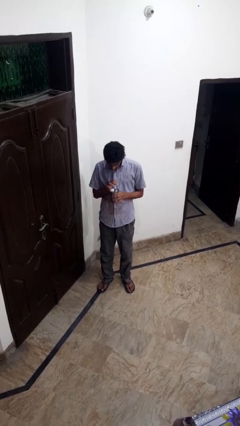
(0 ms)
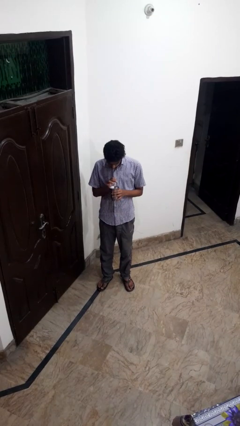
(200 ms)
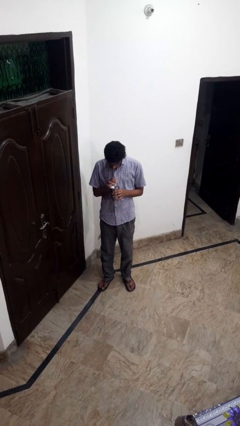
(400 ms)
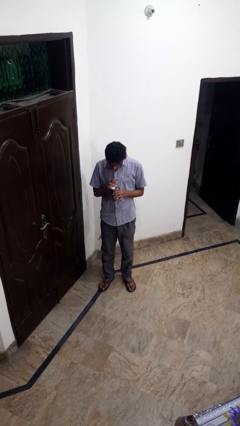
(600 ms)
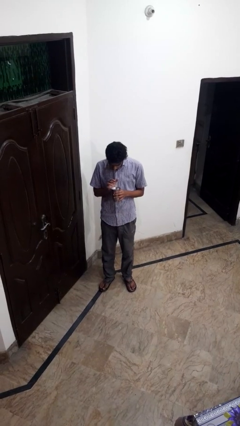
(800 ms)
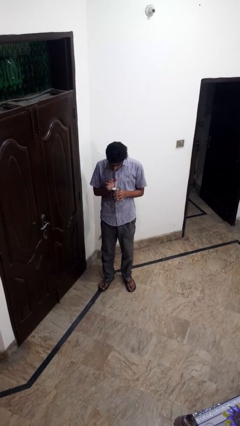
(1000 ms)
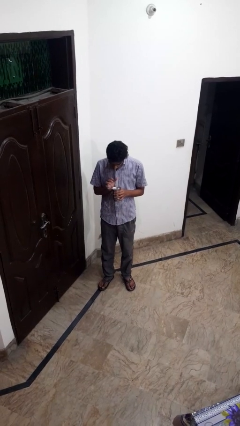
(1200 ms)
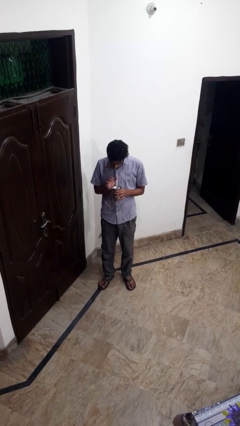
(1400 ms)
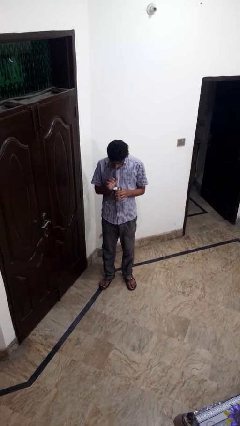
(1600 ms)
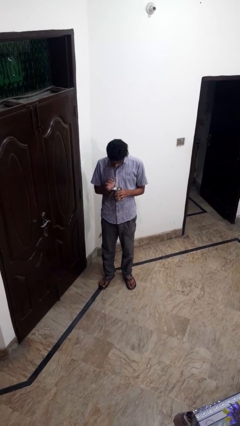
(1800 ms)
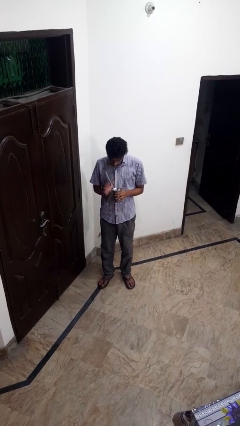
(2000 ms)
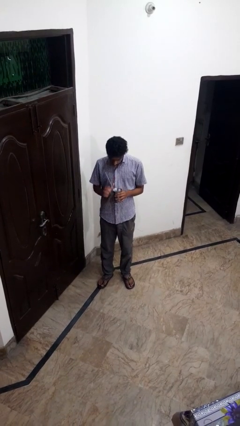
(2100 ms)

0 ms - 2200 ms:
person drinks from straw

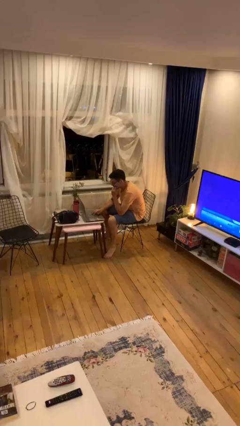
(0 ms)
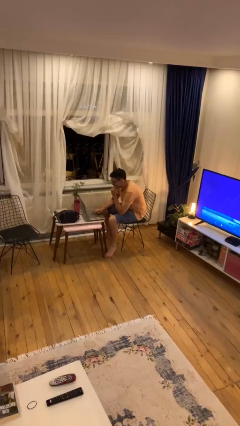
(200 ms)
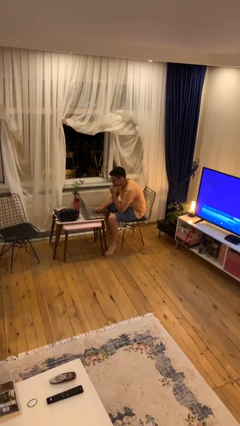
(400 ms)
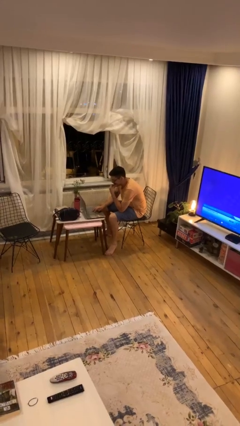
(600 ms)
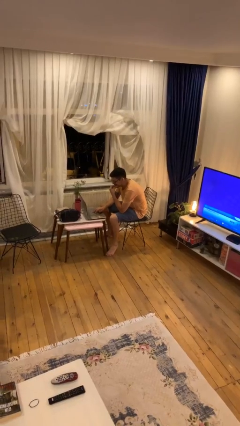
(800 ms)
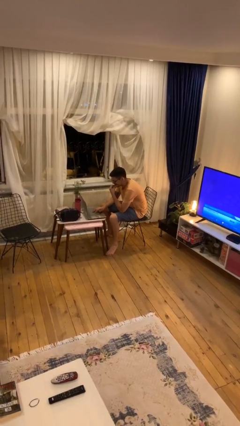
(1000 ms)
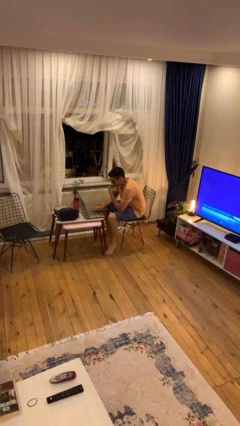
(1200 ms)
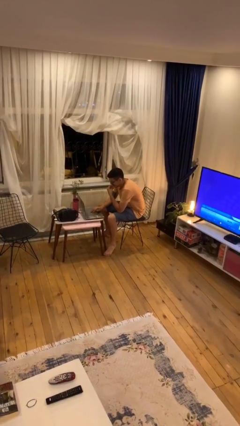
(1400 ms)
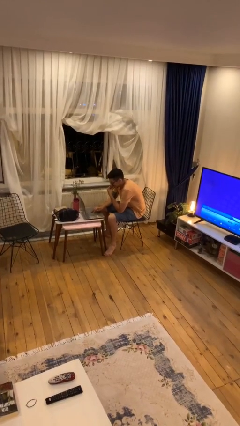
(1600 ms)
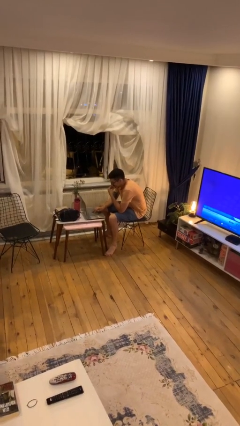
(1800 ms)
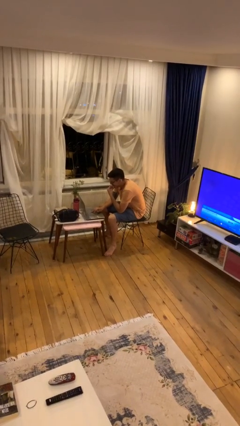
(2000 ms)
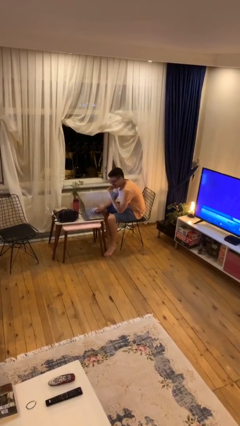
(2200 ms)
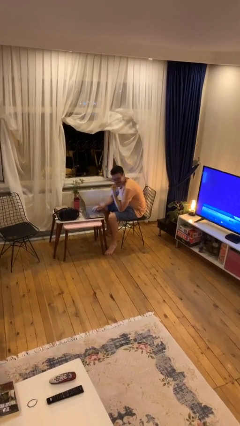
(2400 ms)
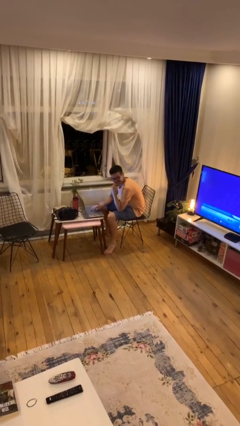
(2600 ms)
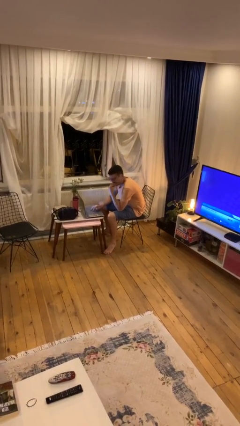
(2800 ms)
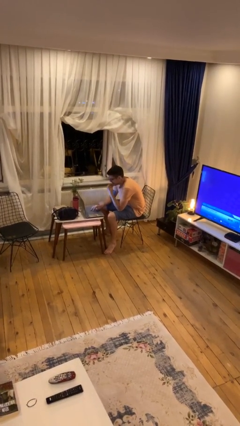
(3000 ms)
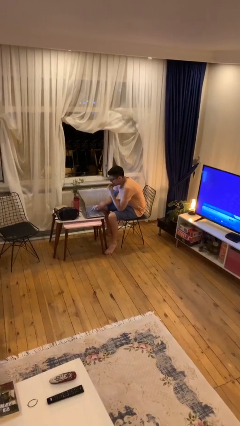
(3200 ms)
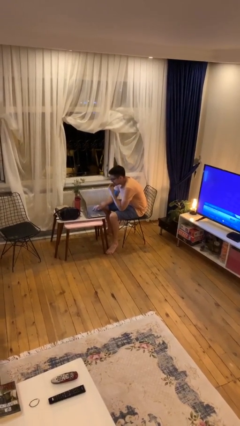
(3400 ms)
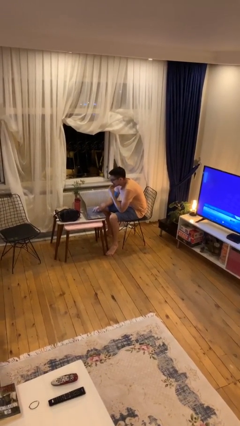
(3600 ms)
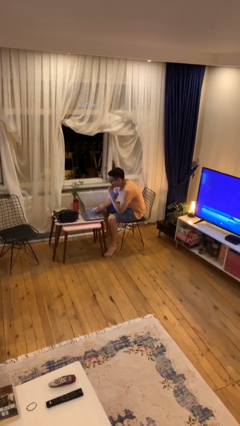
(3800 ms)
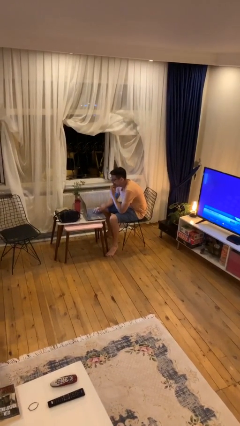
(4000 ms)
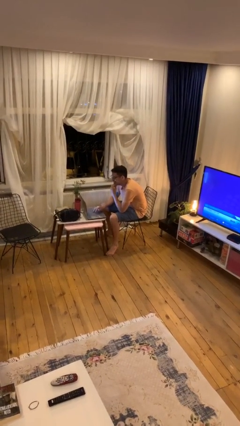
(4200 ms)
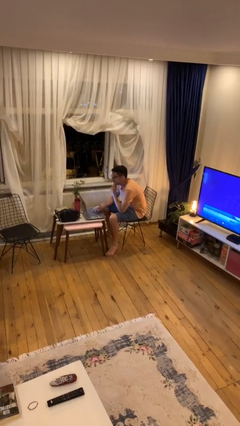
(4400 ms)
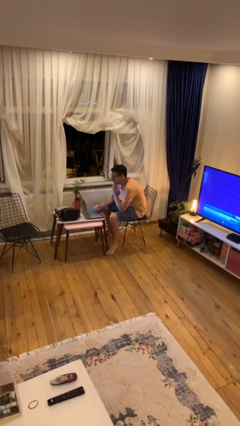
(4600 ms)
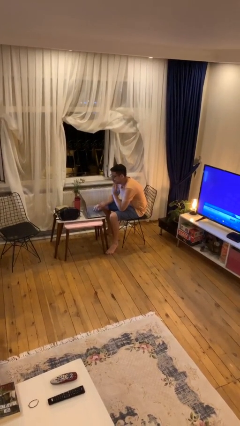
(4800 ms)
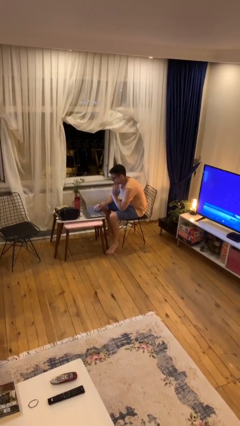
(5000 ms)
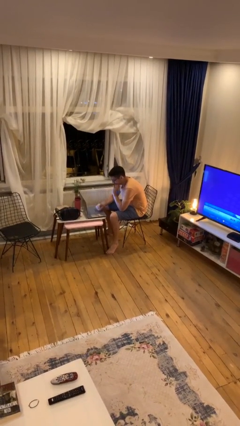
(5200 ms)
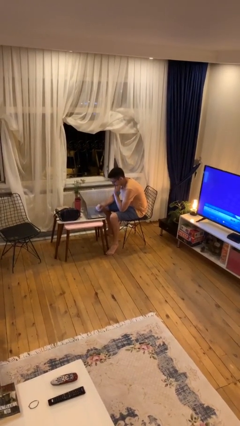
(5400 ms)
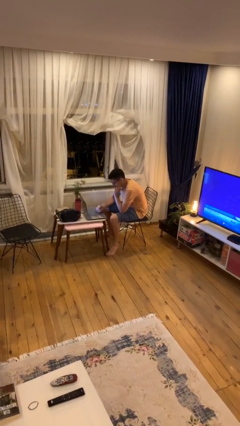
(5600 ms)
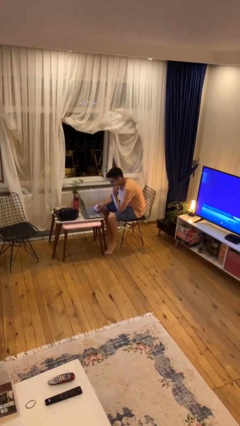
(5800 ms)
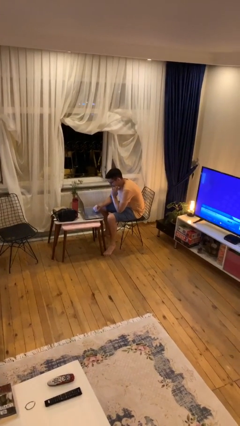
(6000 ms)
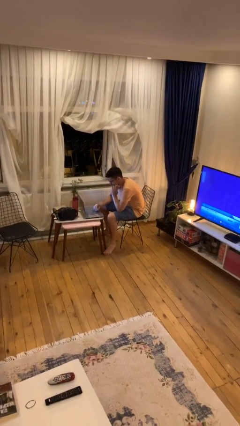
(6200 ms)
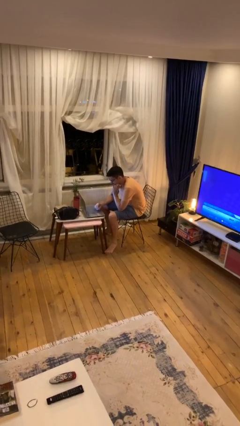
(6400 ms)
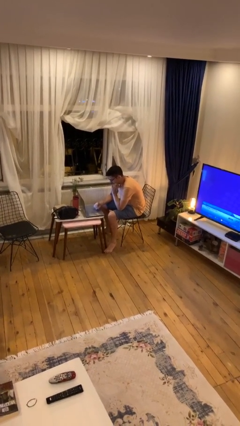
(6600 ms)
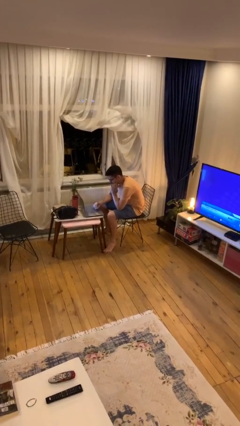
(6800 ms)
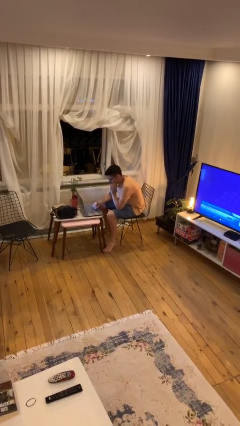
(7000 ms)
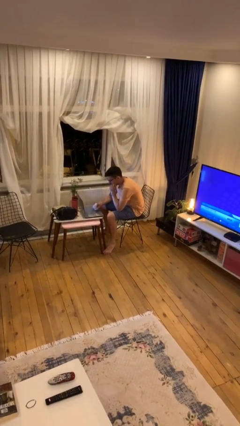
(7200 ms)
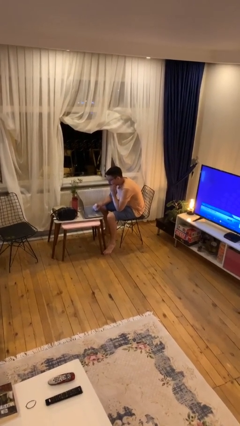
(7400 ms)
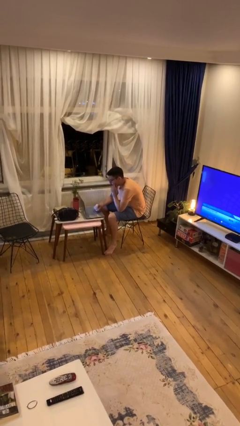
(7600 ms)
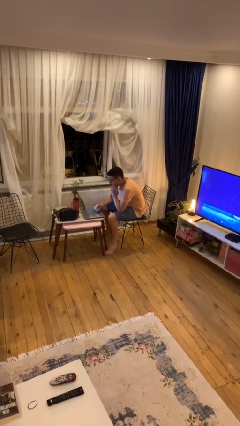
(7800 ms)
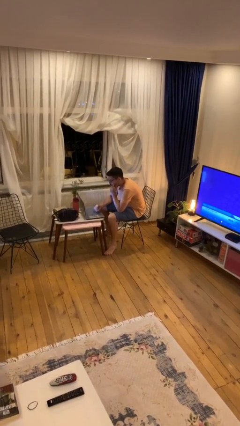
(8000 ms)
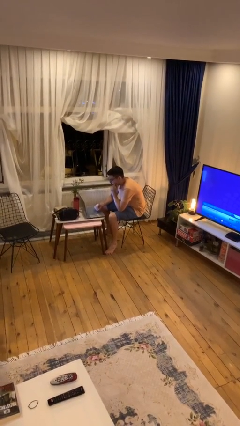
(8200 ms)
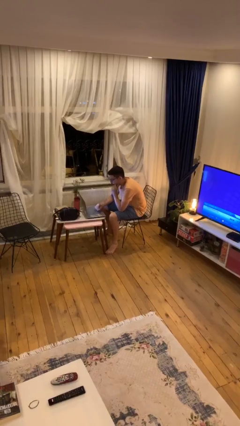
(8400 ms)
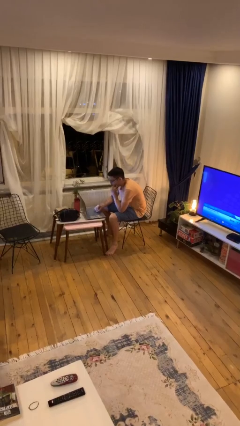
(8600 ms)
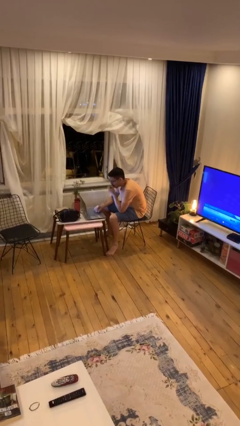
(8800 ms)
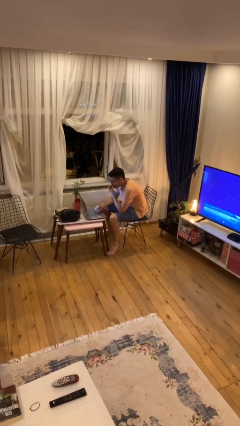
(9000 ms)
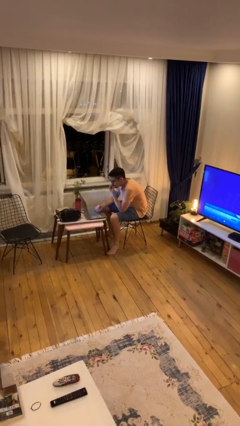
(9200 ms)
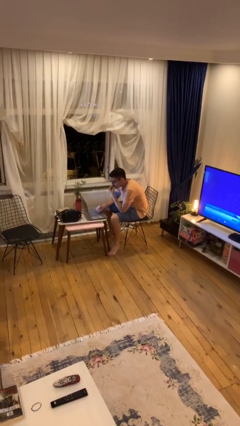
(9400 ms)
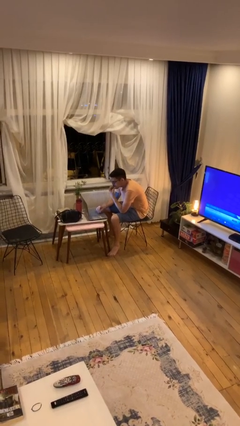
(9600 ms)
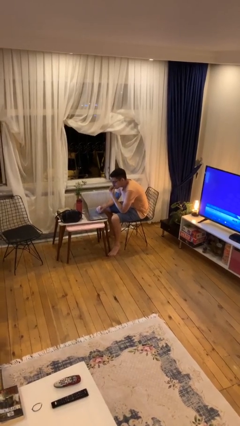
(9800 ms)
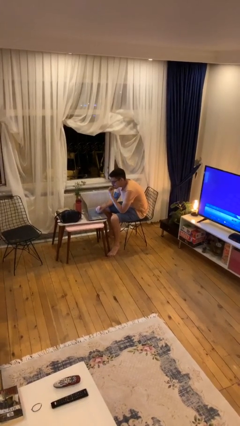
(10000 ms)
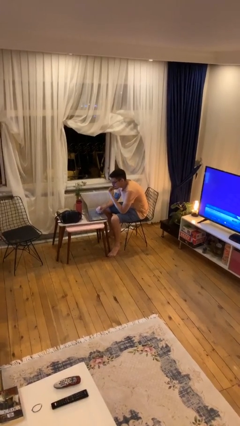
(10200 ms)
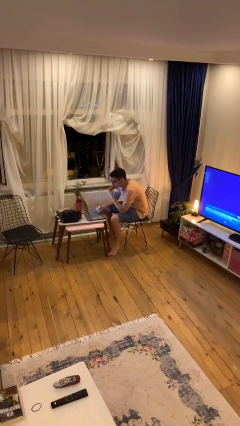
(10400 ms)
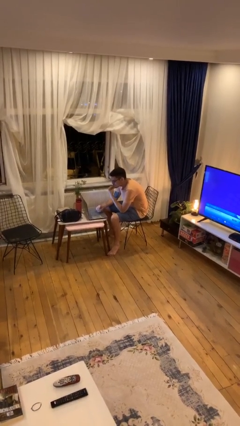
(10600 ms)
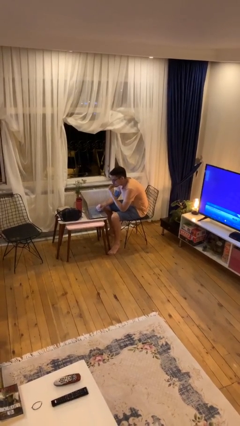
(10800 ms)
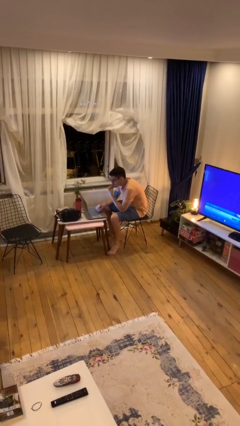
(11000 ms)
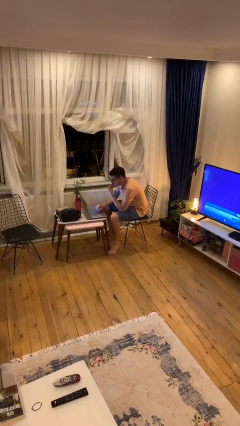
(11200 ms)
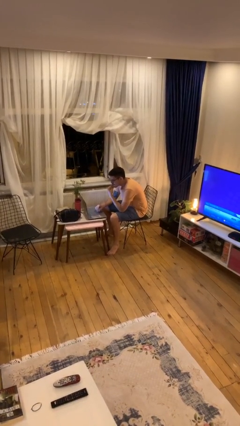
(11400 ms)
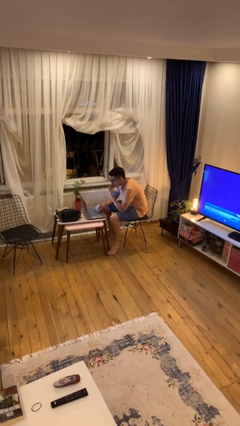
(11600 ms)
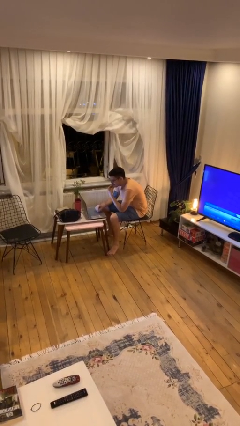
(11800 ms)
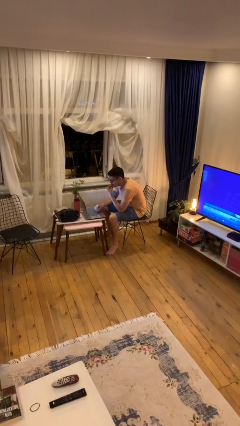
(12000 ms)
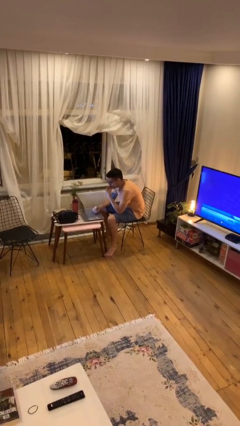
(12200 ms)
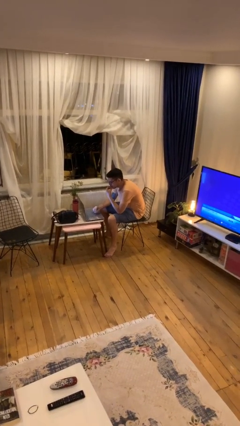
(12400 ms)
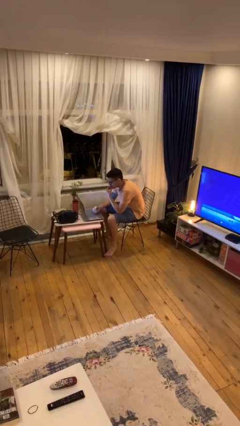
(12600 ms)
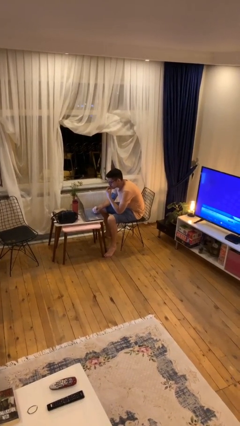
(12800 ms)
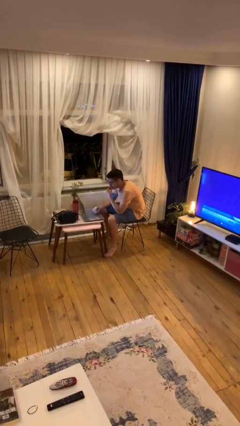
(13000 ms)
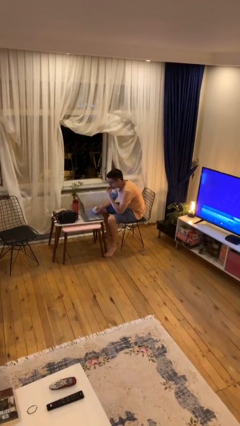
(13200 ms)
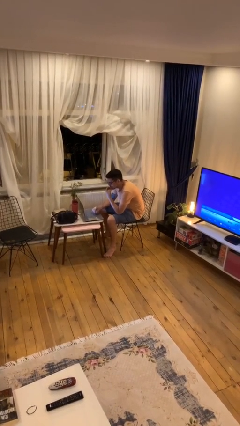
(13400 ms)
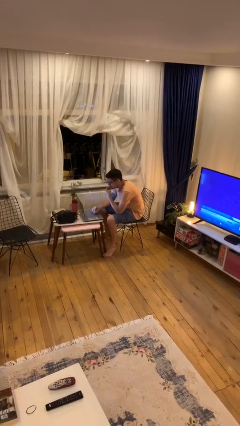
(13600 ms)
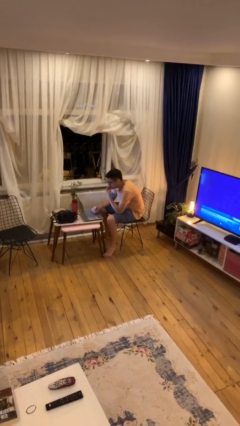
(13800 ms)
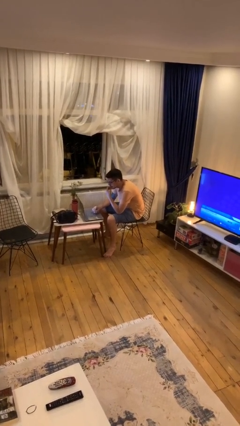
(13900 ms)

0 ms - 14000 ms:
person interacts with laptop

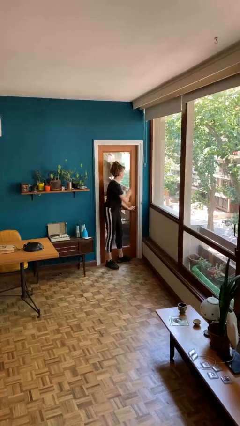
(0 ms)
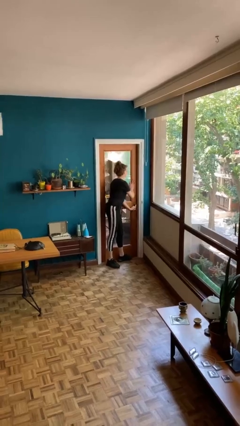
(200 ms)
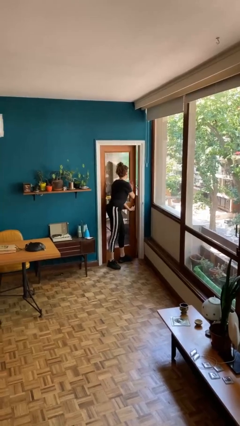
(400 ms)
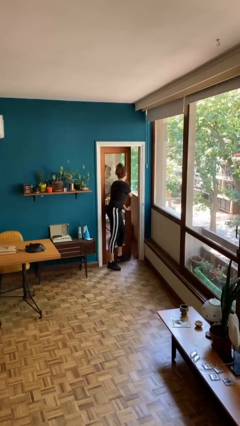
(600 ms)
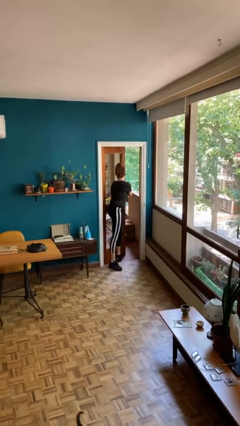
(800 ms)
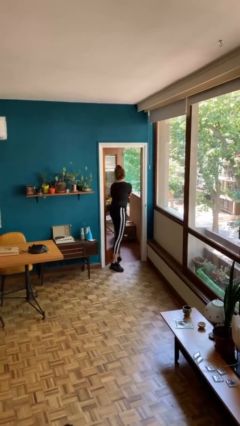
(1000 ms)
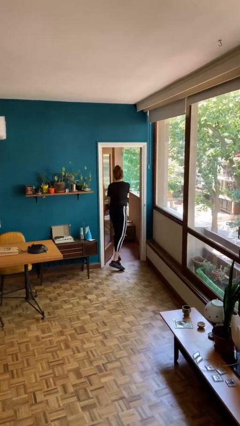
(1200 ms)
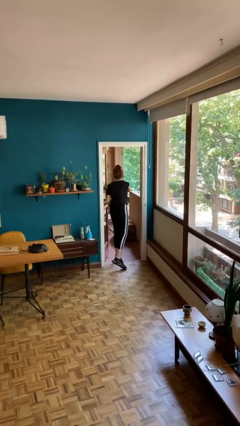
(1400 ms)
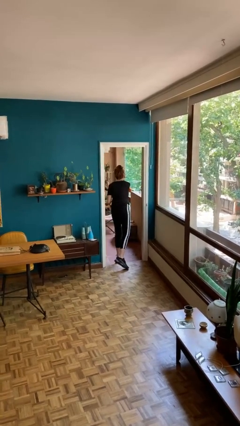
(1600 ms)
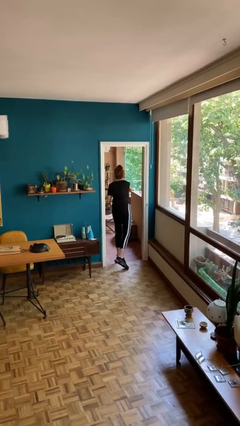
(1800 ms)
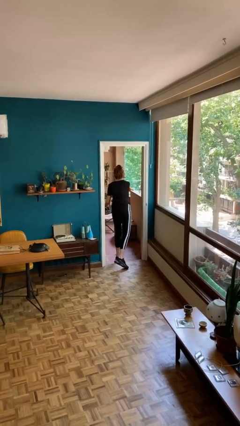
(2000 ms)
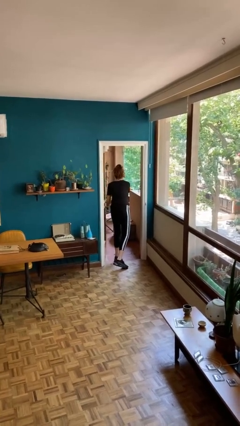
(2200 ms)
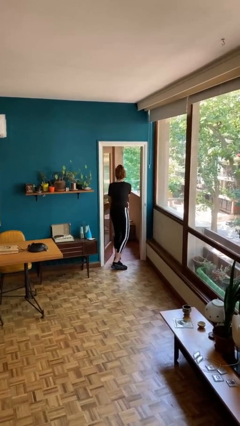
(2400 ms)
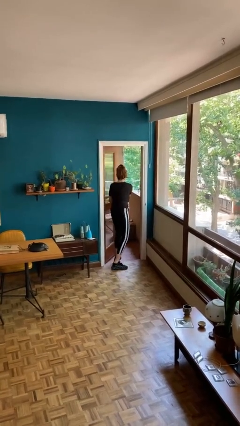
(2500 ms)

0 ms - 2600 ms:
person opens facility door
